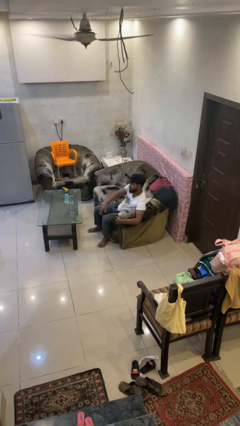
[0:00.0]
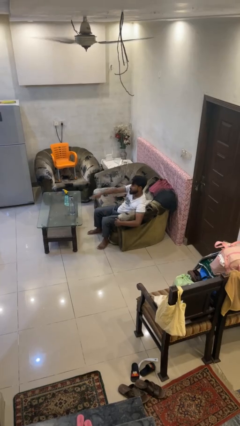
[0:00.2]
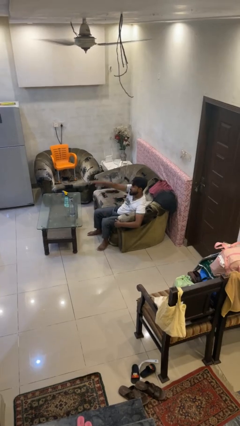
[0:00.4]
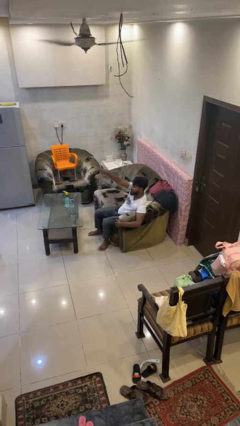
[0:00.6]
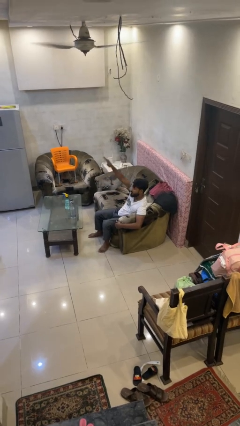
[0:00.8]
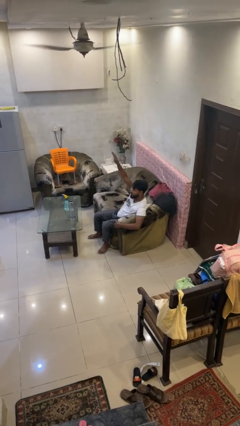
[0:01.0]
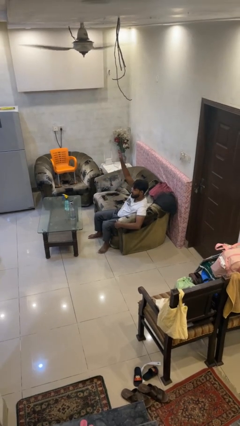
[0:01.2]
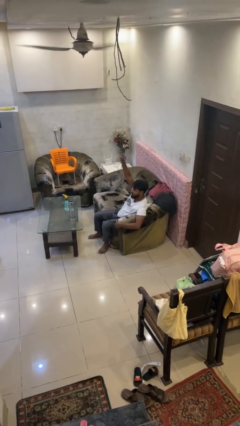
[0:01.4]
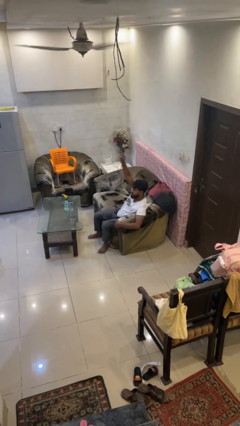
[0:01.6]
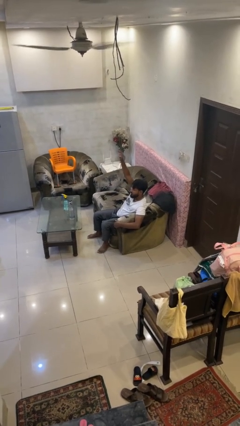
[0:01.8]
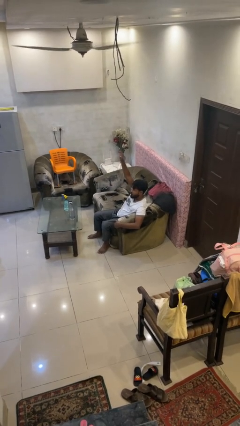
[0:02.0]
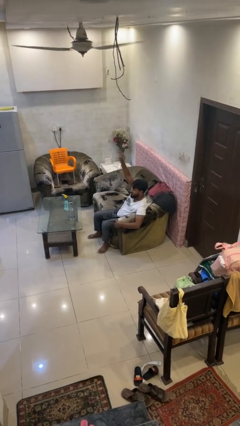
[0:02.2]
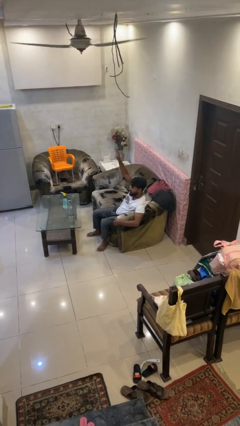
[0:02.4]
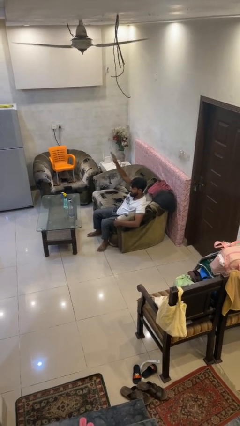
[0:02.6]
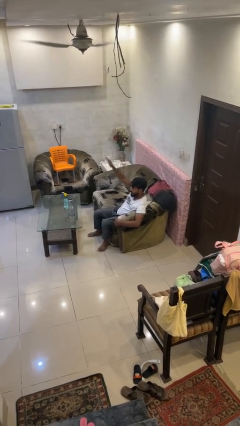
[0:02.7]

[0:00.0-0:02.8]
person gestures raise hand

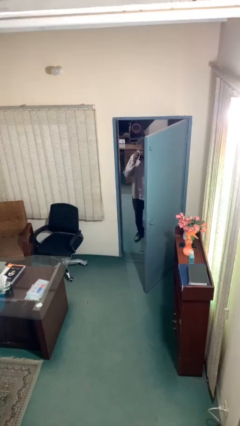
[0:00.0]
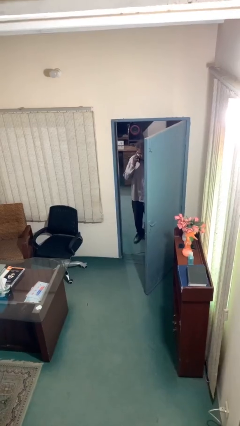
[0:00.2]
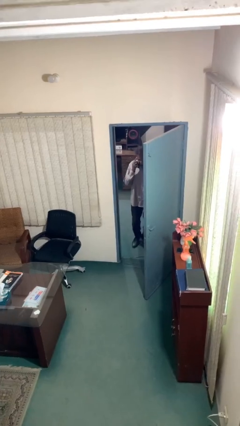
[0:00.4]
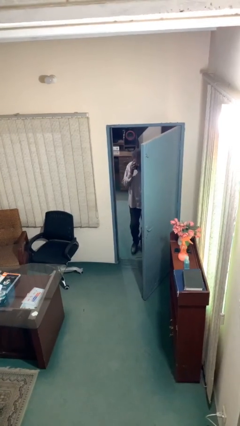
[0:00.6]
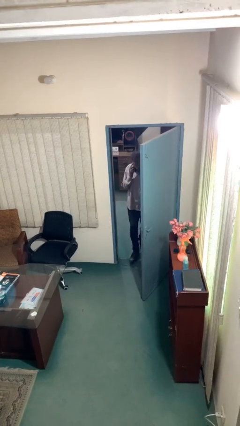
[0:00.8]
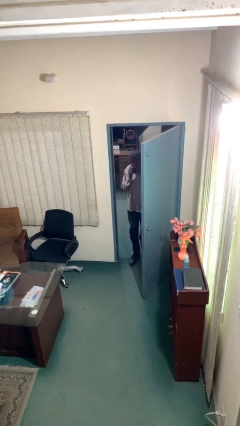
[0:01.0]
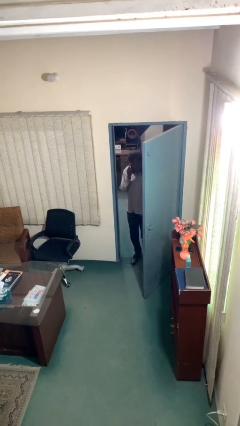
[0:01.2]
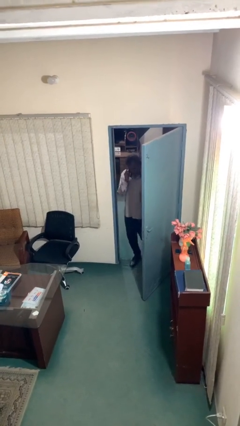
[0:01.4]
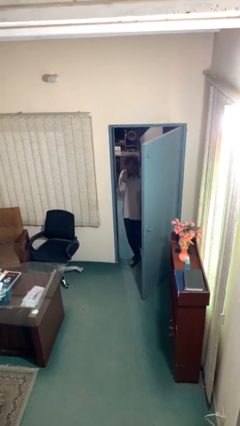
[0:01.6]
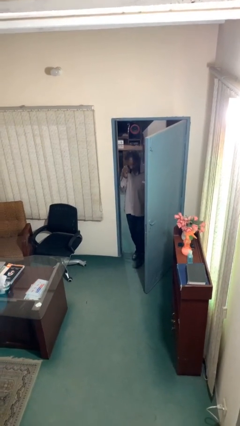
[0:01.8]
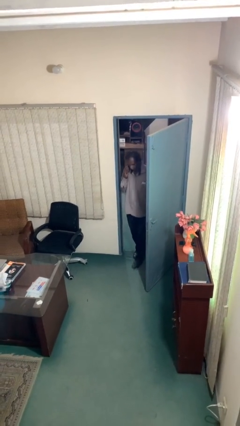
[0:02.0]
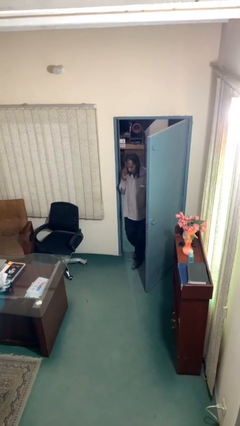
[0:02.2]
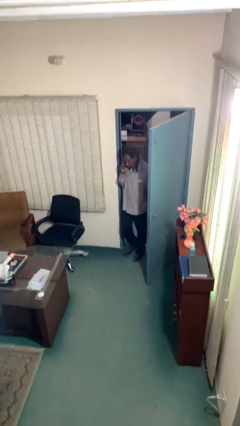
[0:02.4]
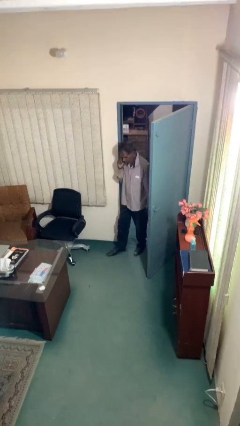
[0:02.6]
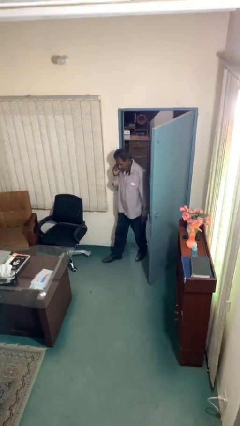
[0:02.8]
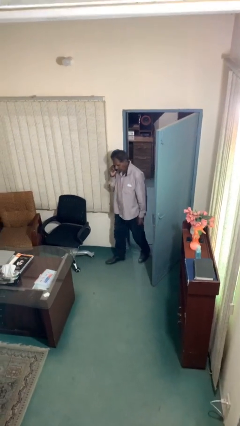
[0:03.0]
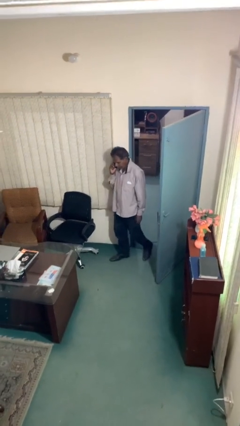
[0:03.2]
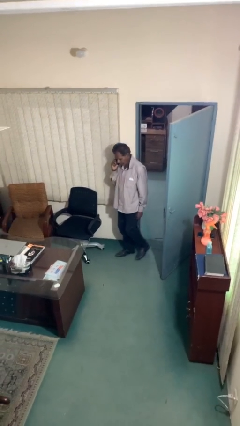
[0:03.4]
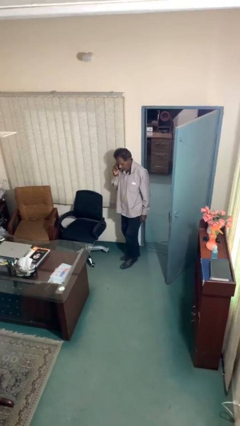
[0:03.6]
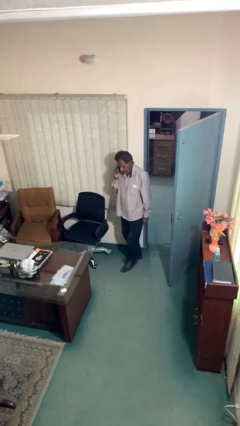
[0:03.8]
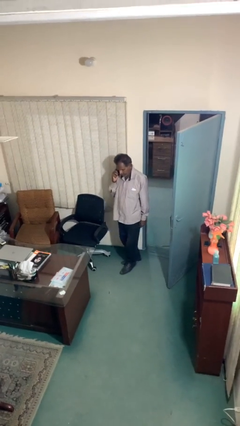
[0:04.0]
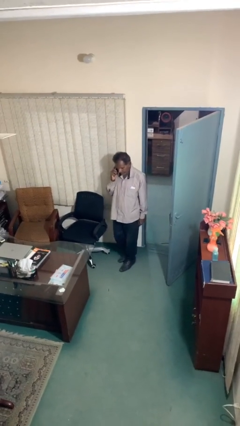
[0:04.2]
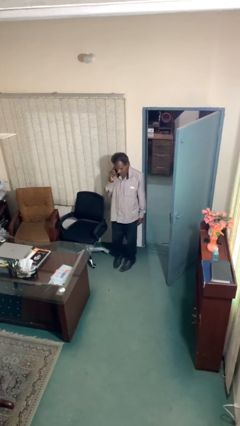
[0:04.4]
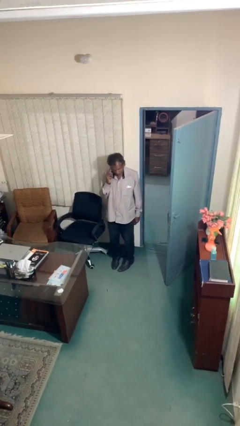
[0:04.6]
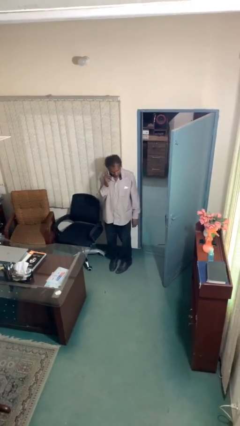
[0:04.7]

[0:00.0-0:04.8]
person enters scene through structure

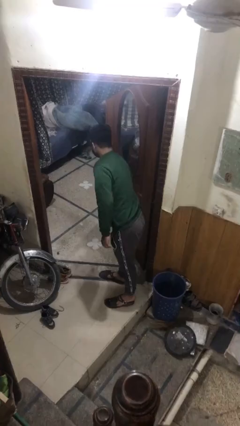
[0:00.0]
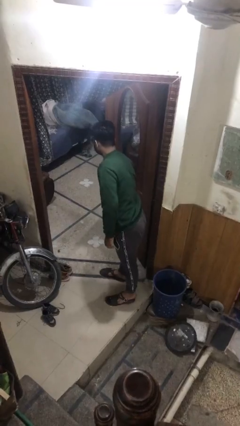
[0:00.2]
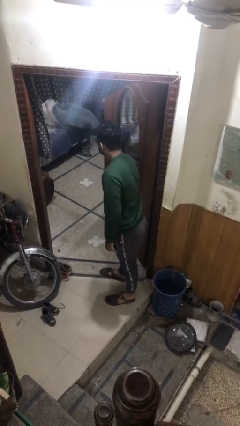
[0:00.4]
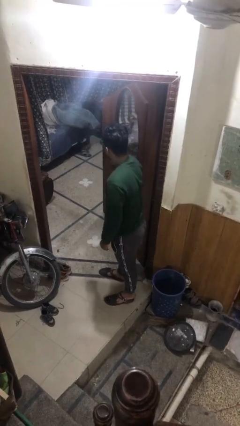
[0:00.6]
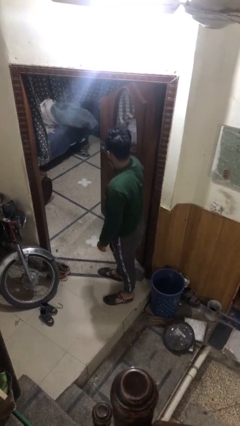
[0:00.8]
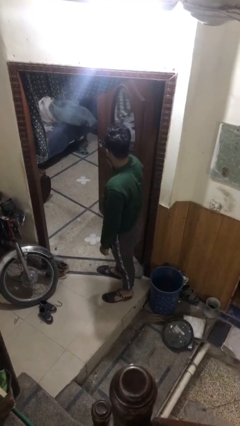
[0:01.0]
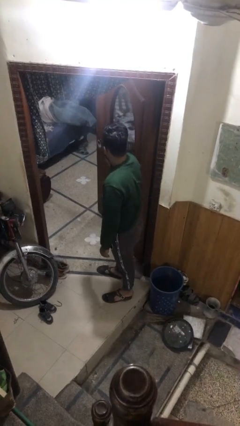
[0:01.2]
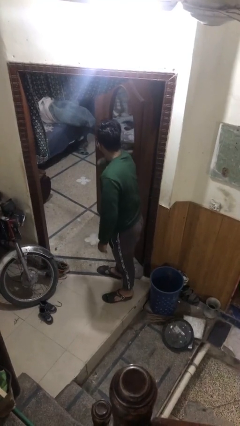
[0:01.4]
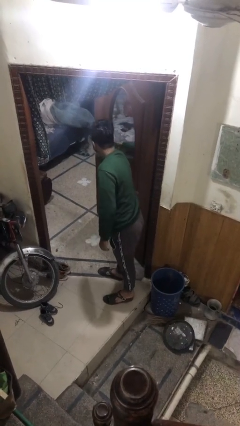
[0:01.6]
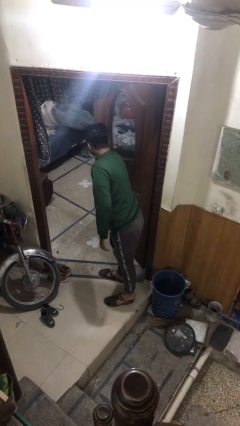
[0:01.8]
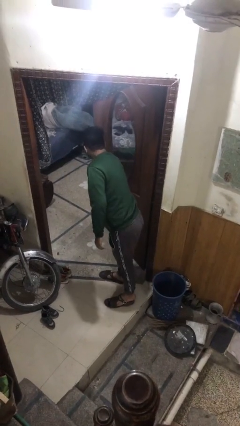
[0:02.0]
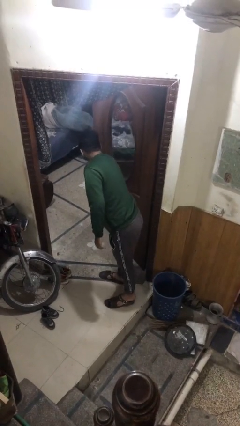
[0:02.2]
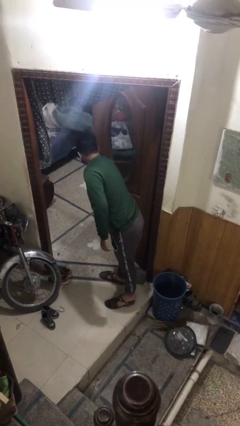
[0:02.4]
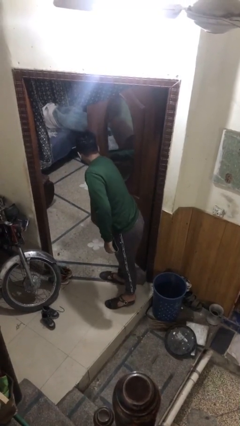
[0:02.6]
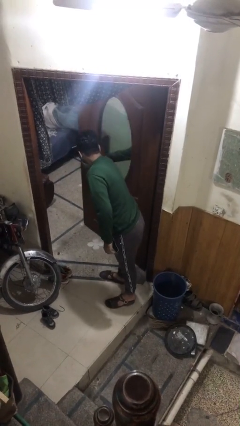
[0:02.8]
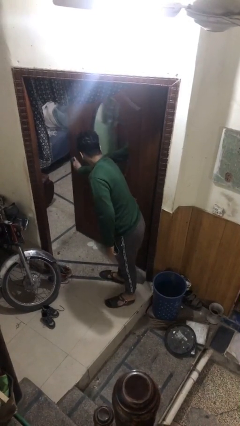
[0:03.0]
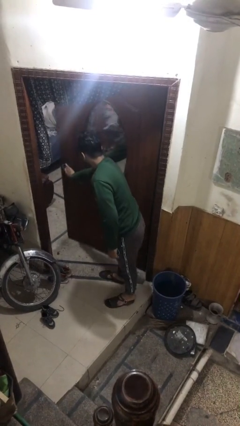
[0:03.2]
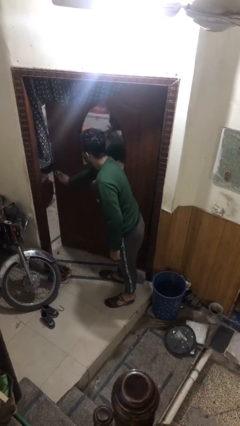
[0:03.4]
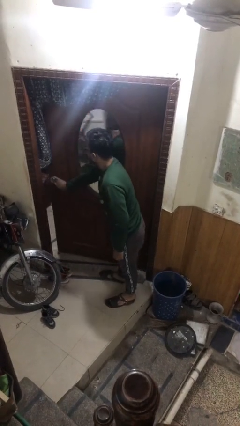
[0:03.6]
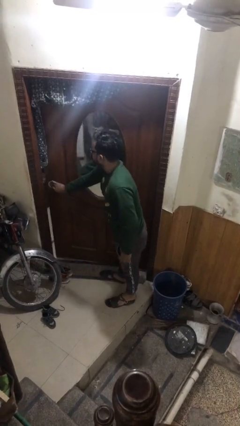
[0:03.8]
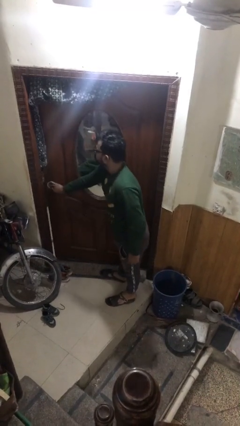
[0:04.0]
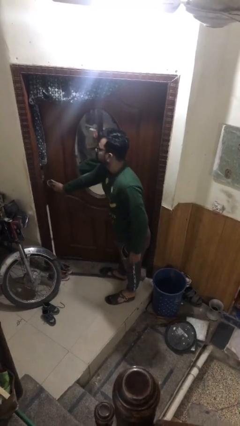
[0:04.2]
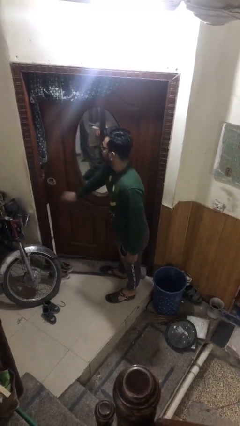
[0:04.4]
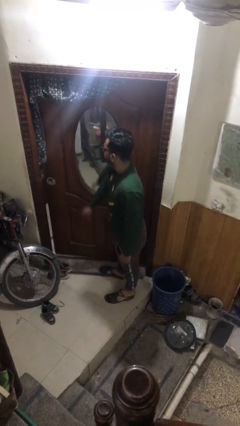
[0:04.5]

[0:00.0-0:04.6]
person closes facility door

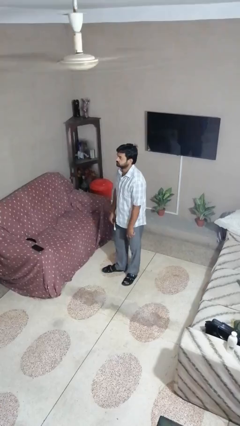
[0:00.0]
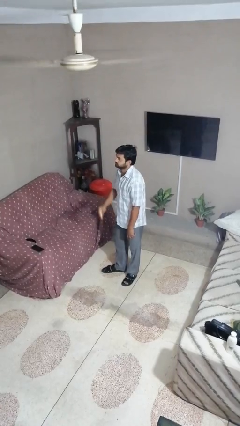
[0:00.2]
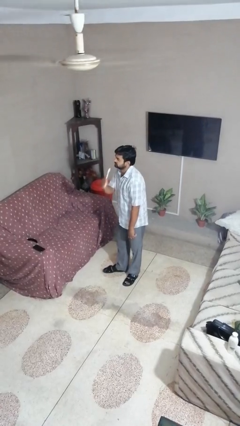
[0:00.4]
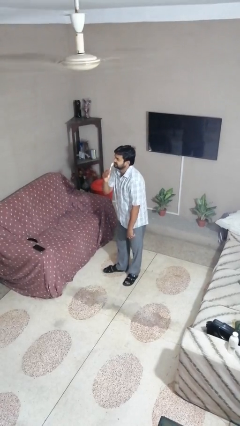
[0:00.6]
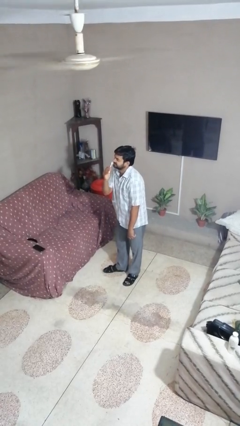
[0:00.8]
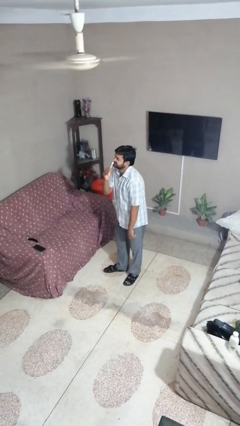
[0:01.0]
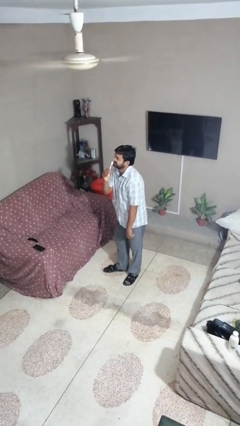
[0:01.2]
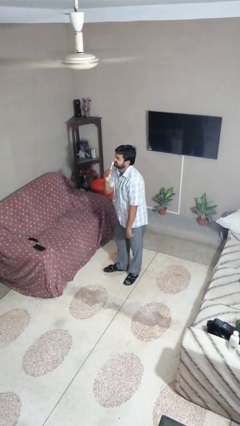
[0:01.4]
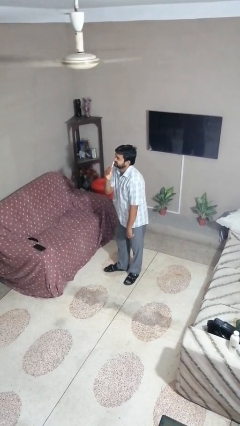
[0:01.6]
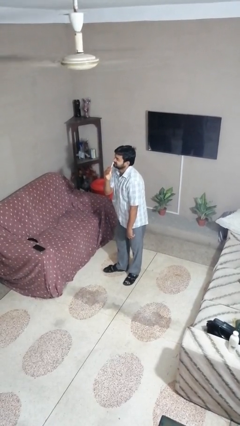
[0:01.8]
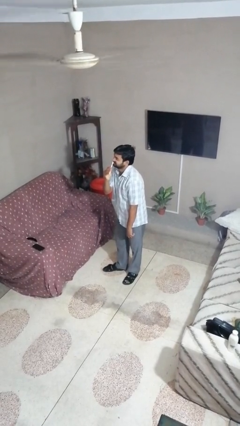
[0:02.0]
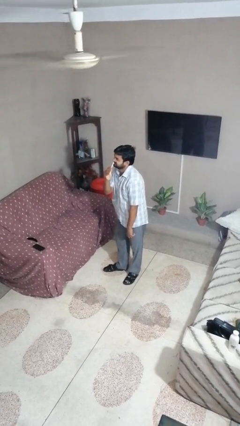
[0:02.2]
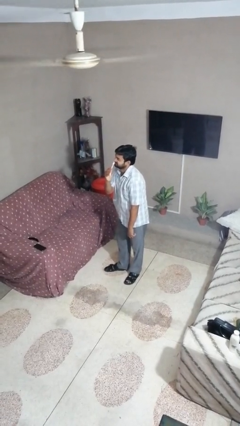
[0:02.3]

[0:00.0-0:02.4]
person brushes teeth

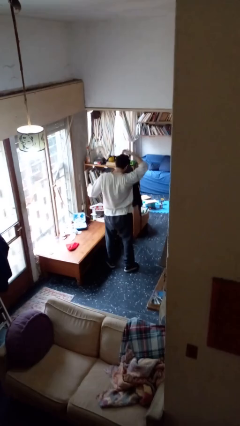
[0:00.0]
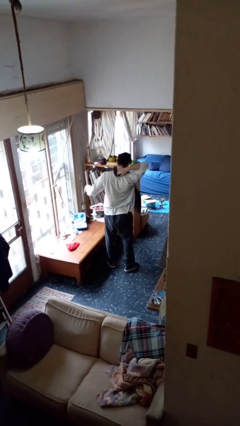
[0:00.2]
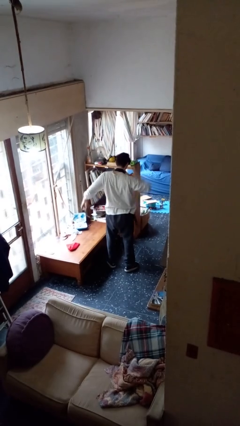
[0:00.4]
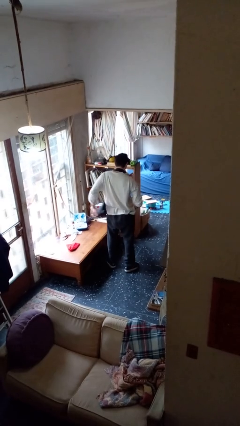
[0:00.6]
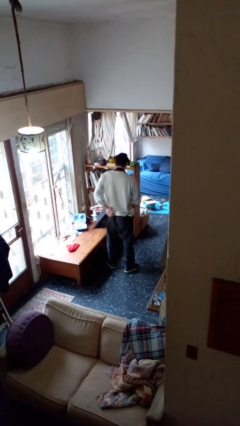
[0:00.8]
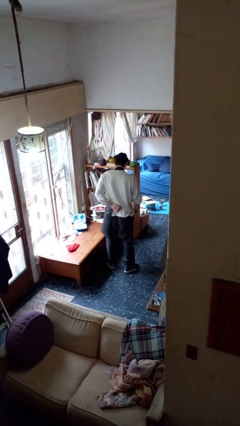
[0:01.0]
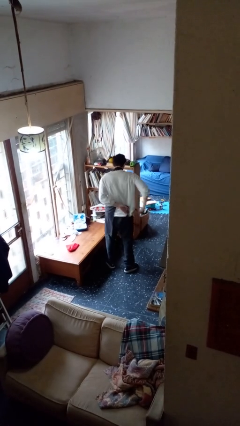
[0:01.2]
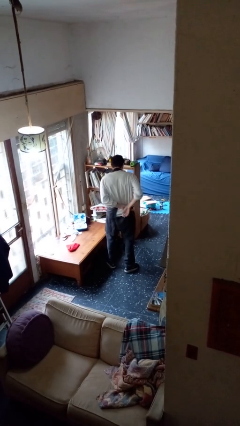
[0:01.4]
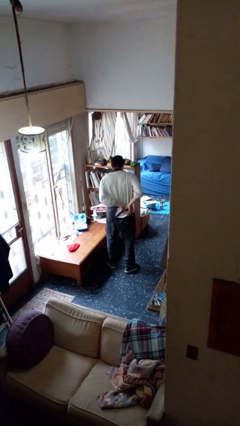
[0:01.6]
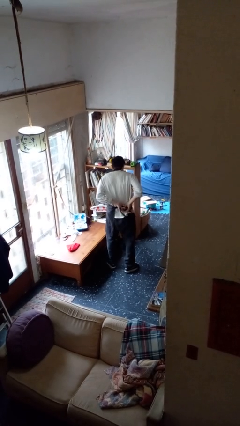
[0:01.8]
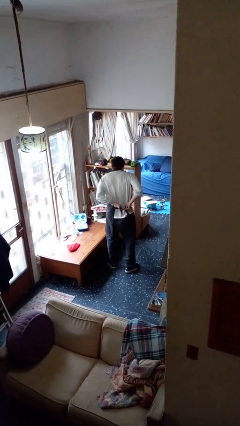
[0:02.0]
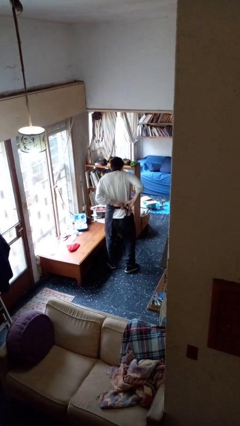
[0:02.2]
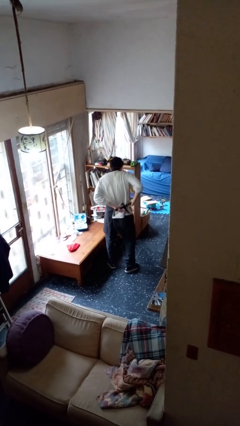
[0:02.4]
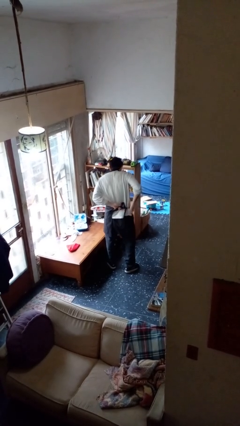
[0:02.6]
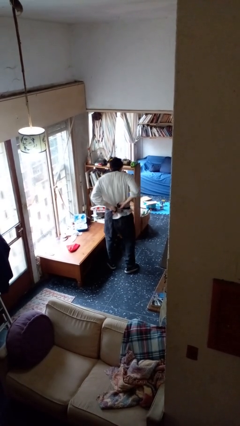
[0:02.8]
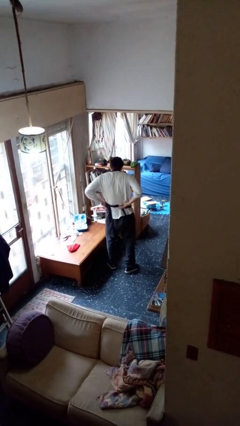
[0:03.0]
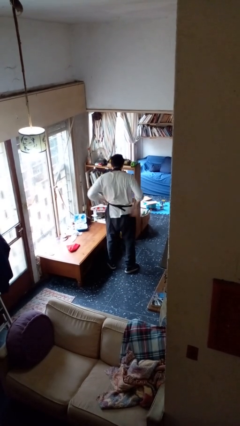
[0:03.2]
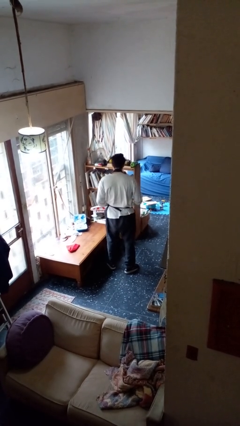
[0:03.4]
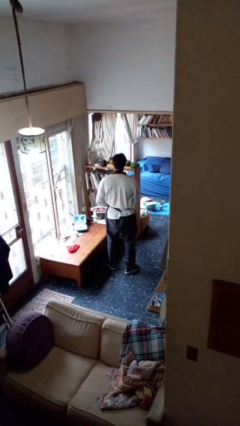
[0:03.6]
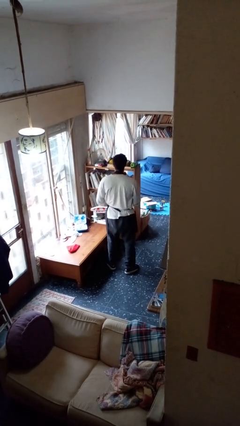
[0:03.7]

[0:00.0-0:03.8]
person puts on apron
